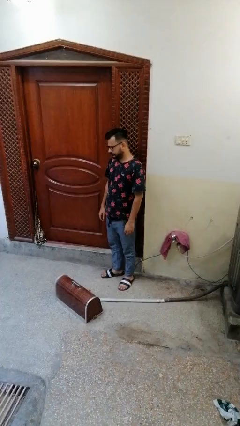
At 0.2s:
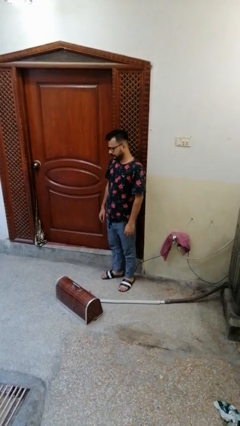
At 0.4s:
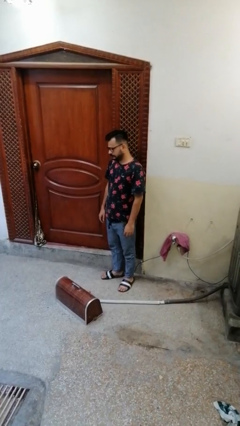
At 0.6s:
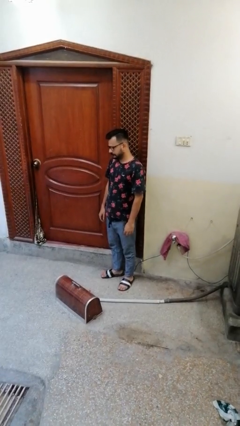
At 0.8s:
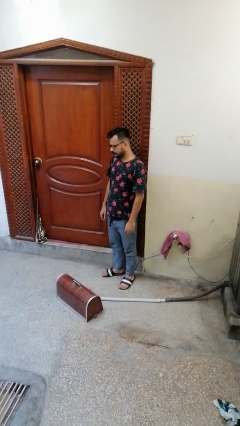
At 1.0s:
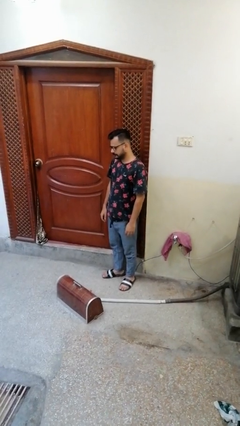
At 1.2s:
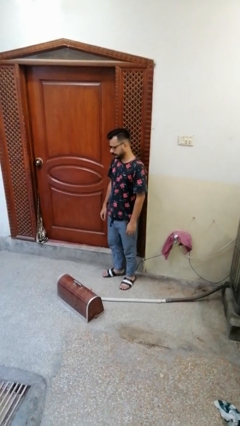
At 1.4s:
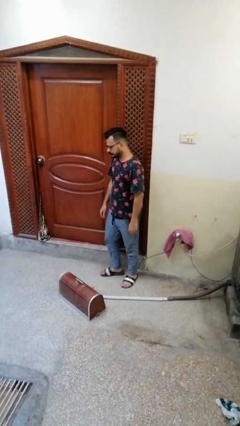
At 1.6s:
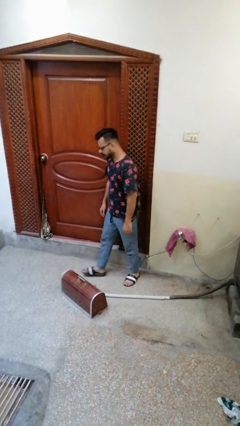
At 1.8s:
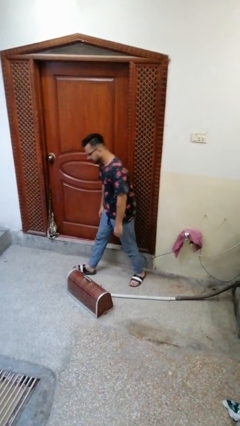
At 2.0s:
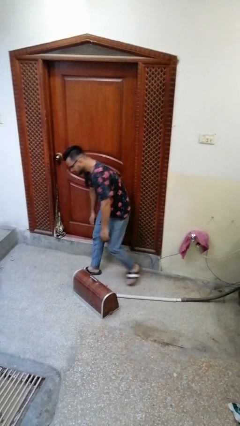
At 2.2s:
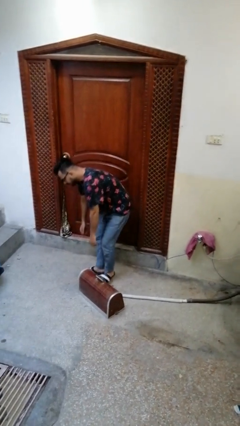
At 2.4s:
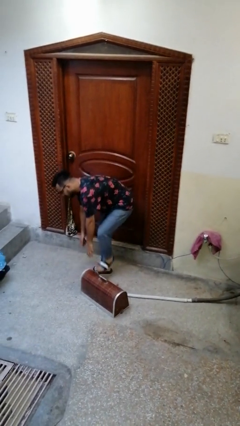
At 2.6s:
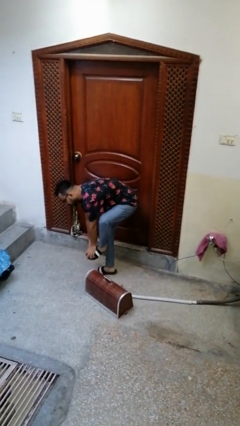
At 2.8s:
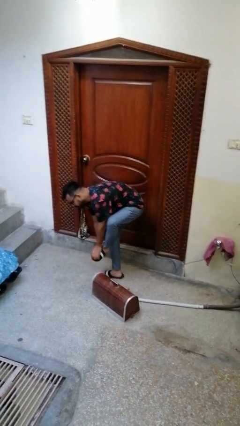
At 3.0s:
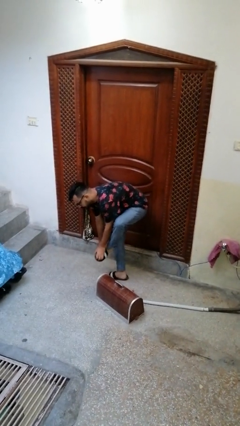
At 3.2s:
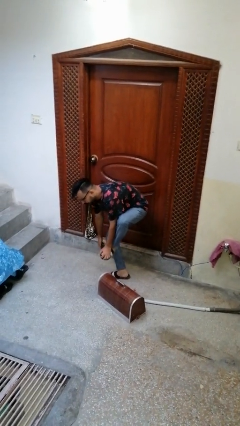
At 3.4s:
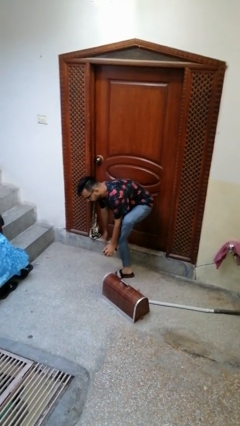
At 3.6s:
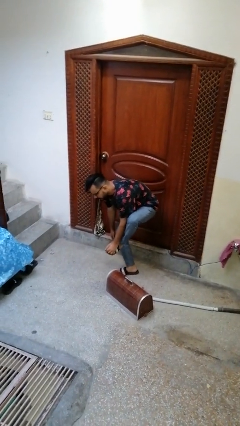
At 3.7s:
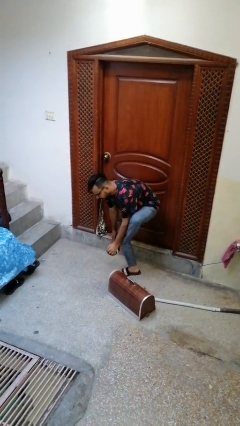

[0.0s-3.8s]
person trips on object on floor

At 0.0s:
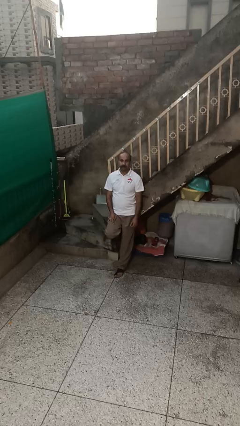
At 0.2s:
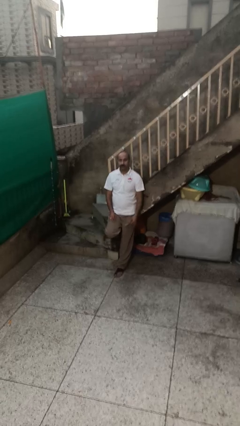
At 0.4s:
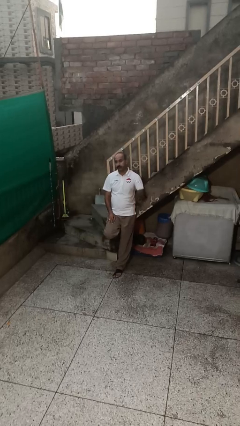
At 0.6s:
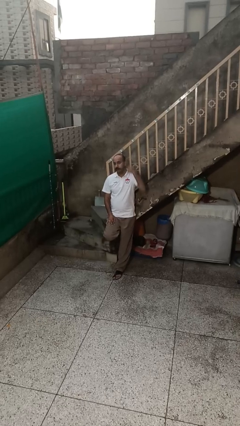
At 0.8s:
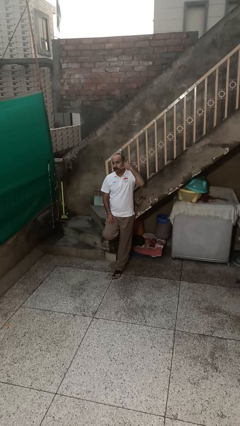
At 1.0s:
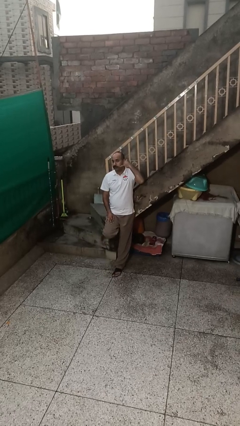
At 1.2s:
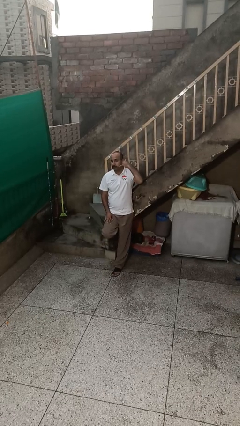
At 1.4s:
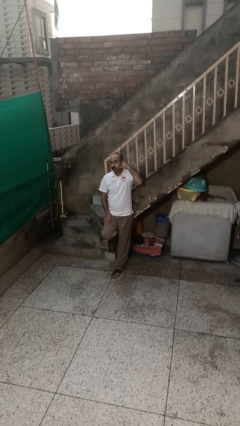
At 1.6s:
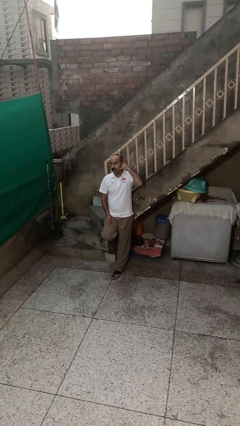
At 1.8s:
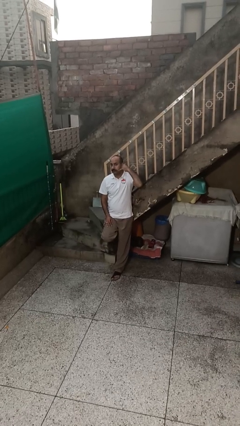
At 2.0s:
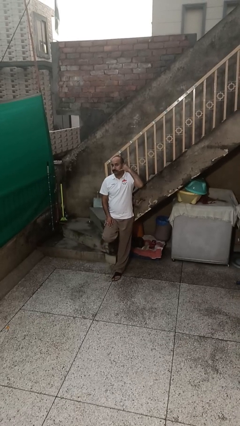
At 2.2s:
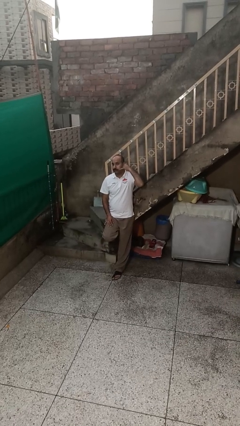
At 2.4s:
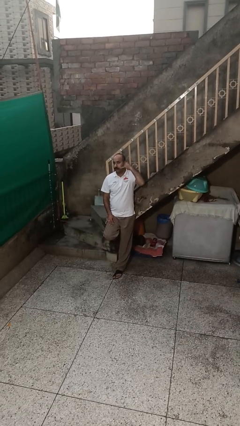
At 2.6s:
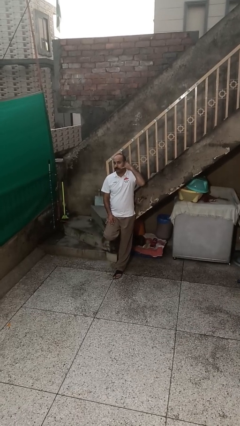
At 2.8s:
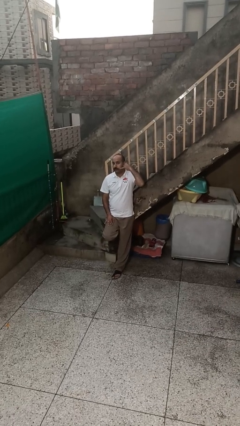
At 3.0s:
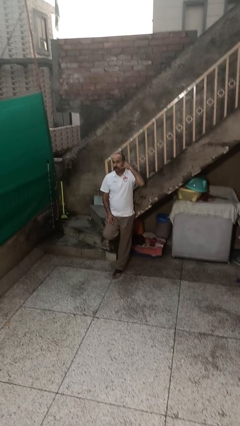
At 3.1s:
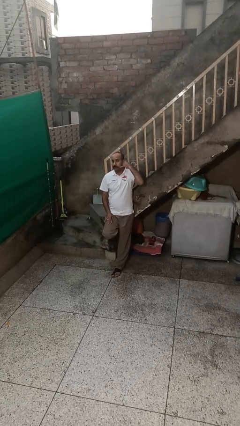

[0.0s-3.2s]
person gestures call me

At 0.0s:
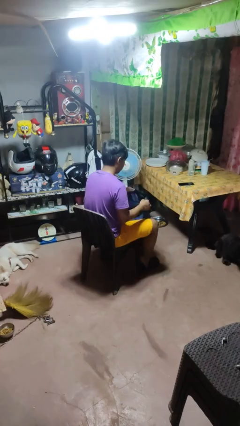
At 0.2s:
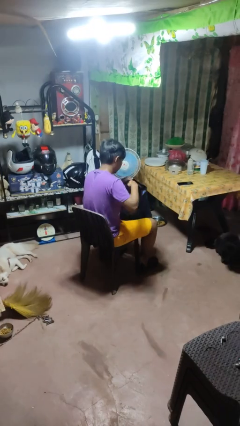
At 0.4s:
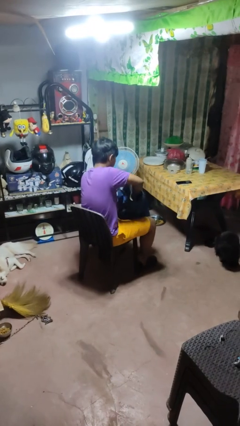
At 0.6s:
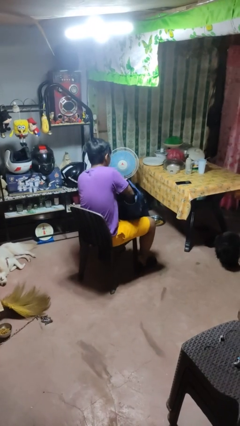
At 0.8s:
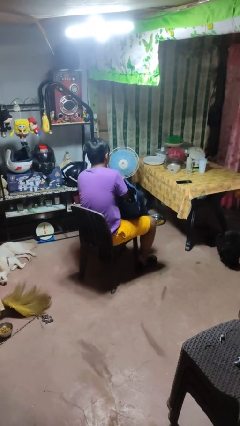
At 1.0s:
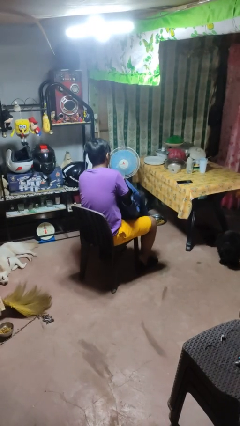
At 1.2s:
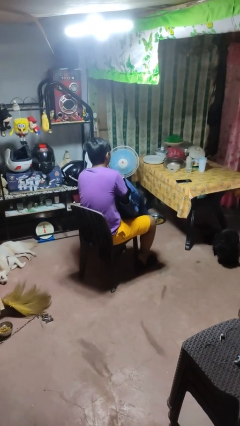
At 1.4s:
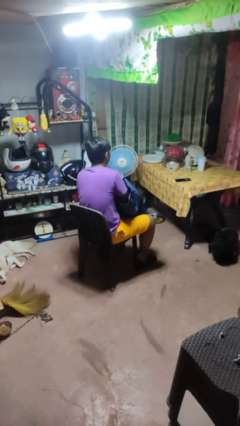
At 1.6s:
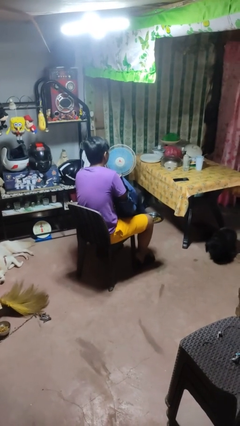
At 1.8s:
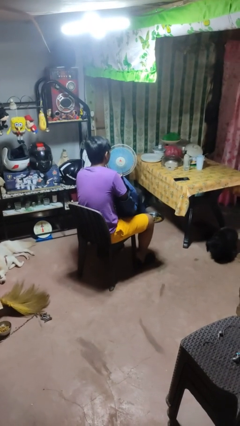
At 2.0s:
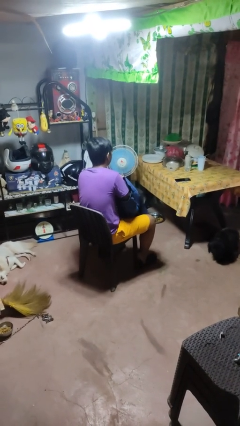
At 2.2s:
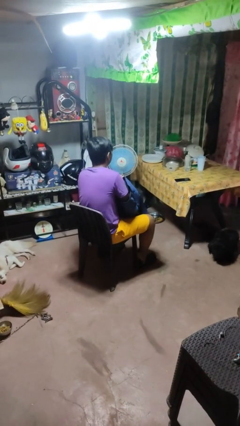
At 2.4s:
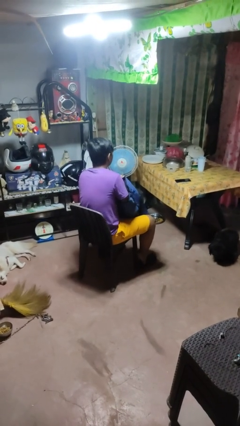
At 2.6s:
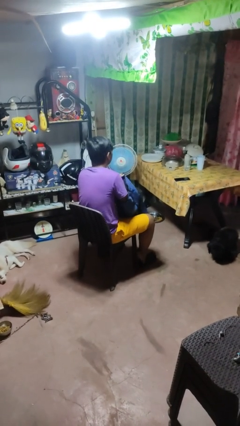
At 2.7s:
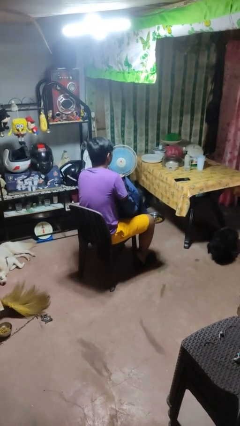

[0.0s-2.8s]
person searches in backpack

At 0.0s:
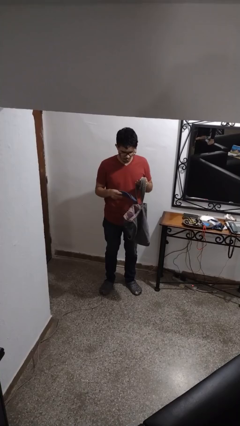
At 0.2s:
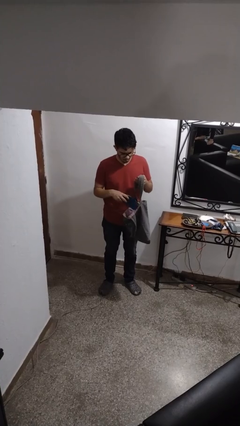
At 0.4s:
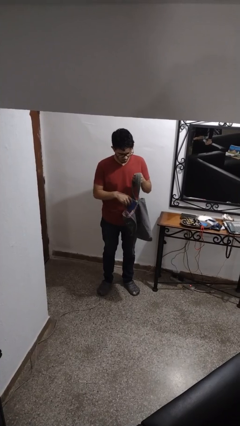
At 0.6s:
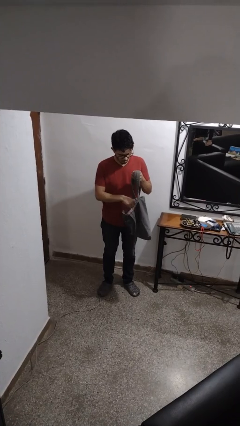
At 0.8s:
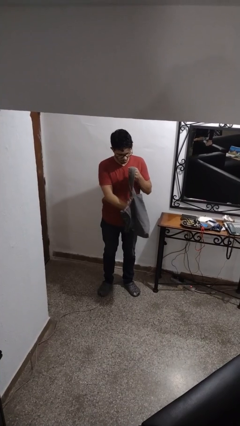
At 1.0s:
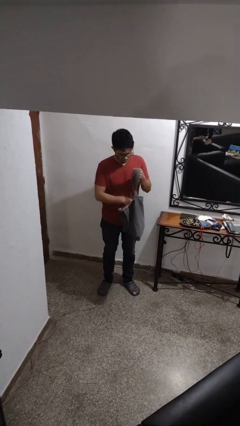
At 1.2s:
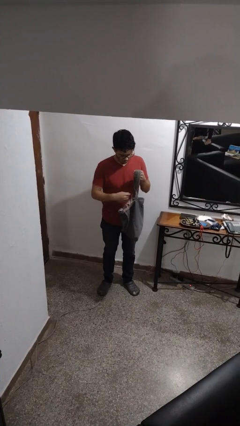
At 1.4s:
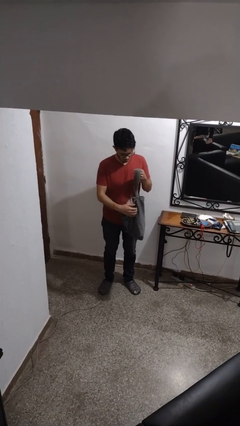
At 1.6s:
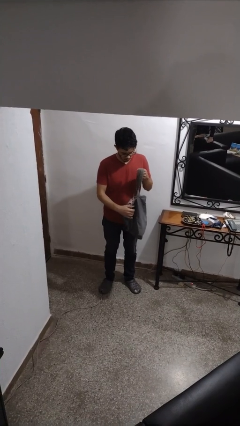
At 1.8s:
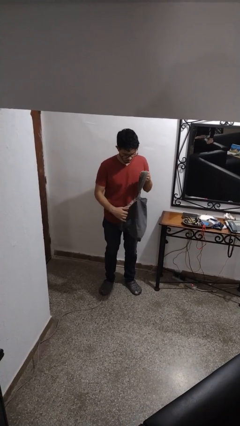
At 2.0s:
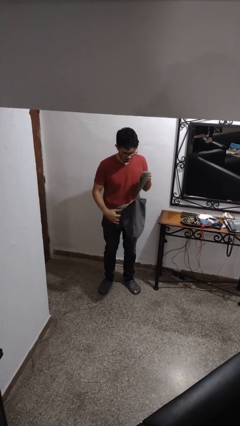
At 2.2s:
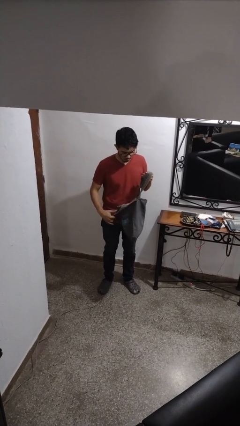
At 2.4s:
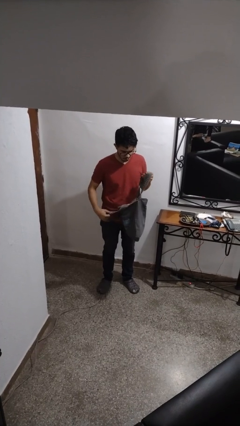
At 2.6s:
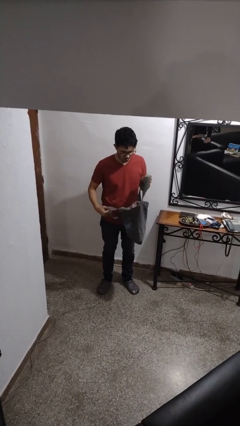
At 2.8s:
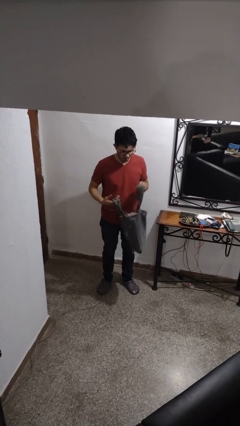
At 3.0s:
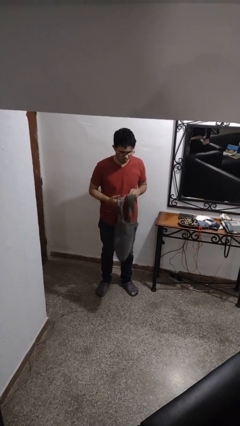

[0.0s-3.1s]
person puts object into purse

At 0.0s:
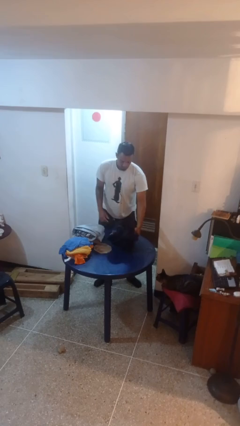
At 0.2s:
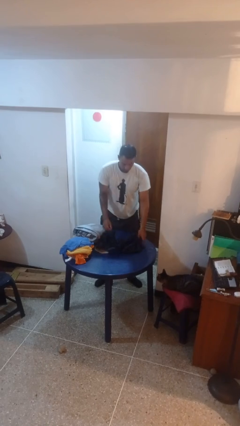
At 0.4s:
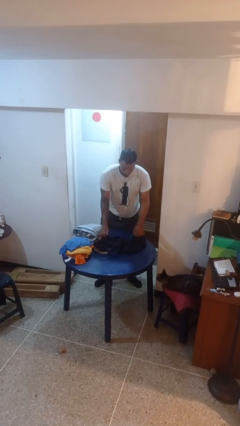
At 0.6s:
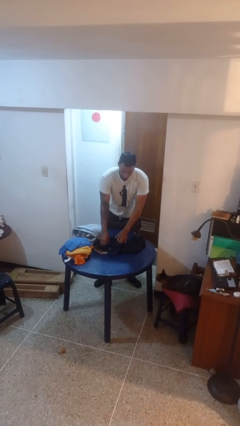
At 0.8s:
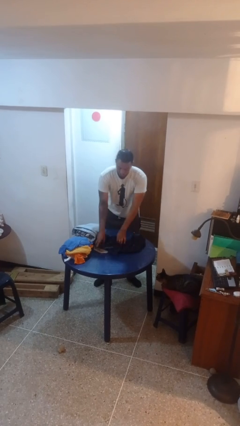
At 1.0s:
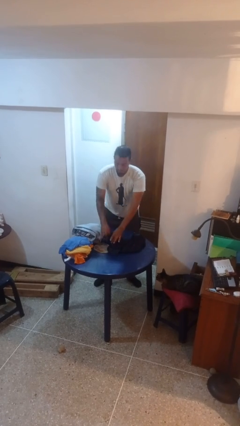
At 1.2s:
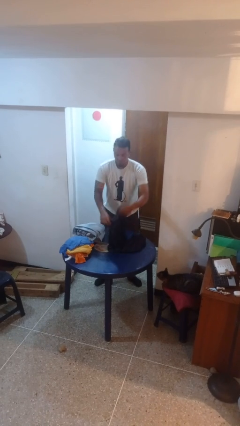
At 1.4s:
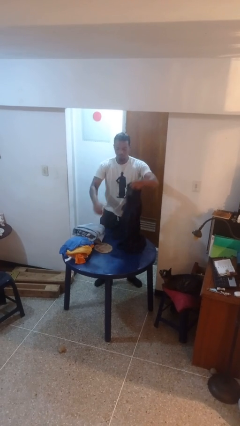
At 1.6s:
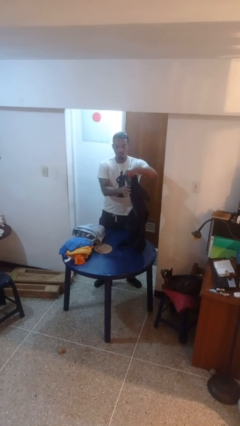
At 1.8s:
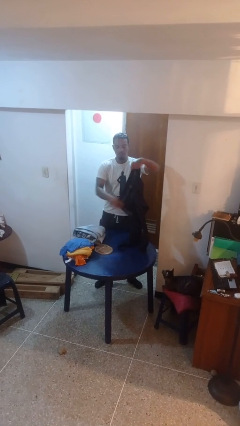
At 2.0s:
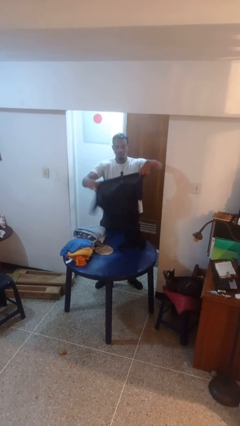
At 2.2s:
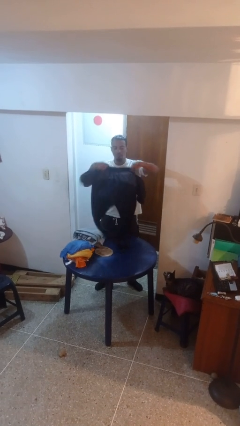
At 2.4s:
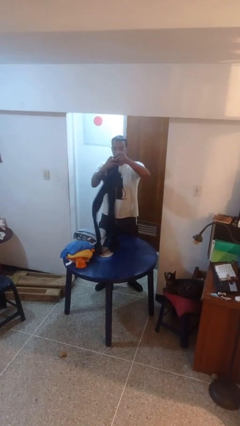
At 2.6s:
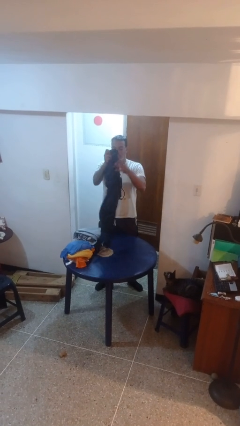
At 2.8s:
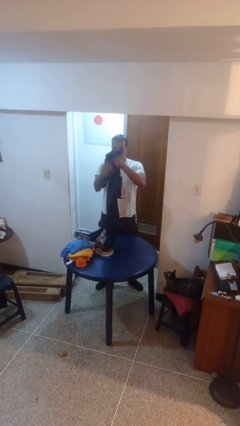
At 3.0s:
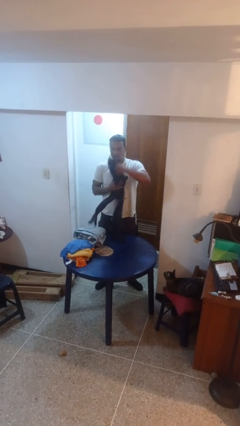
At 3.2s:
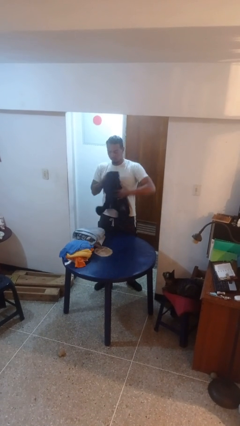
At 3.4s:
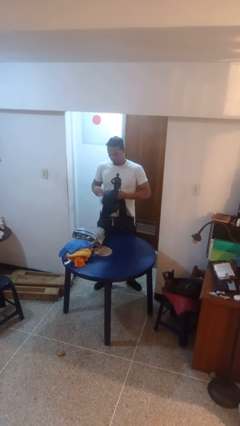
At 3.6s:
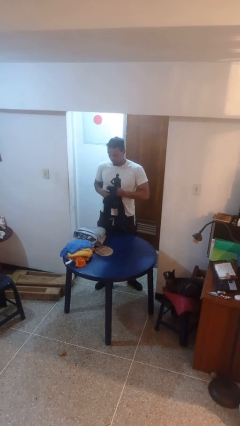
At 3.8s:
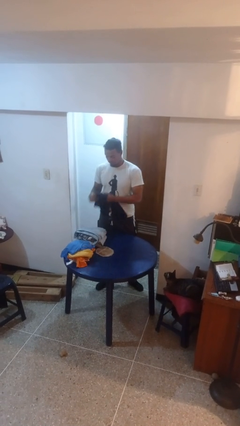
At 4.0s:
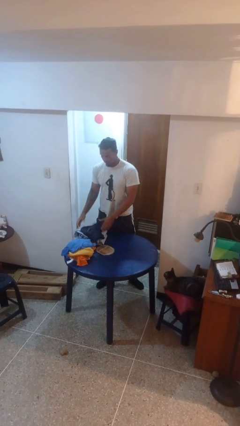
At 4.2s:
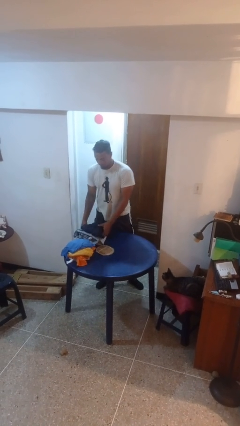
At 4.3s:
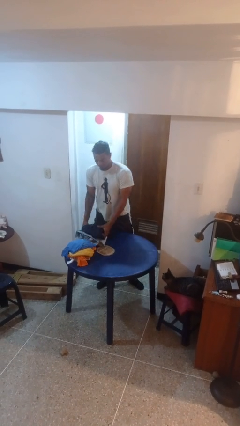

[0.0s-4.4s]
person folds pants
